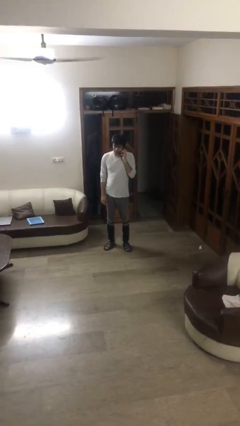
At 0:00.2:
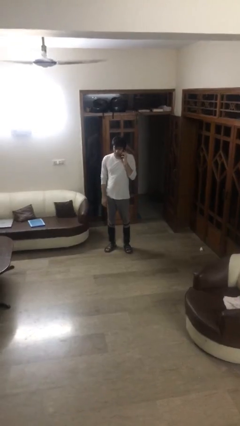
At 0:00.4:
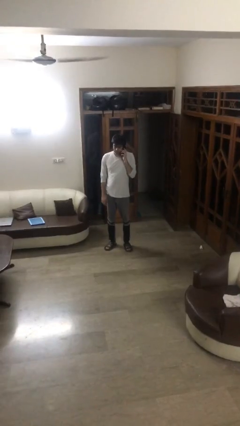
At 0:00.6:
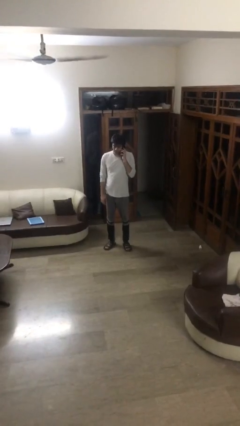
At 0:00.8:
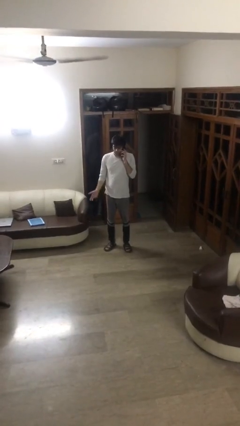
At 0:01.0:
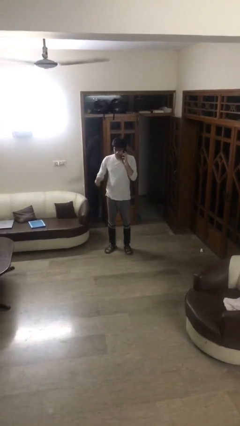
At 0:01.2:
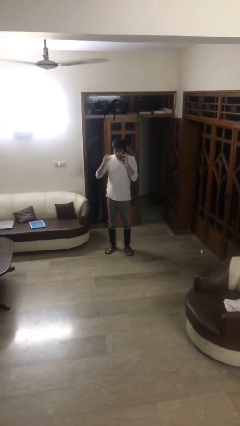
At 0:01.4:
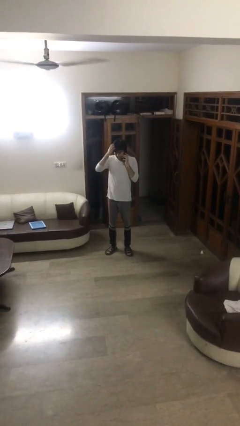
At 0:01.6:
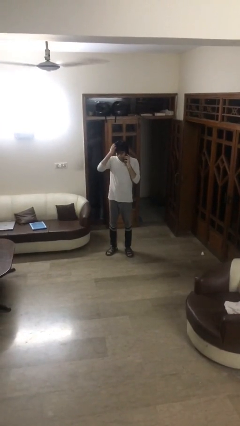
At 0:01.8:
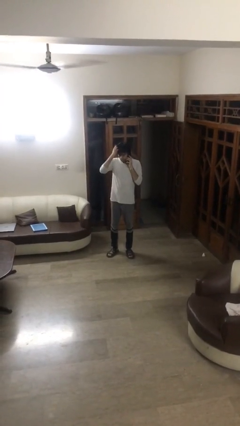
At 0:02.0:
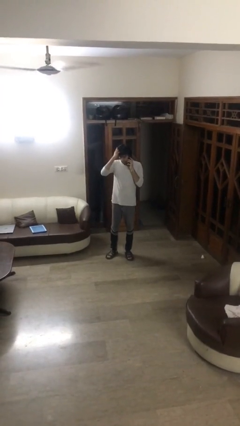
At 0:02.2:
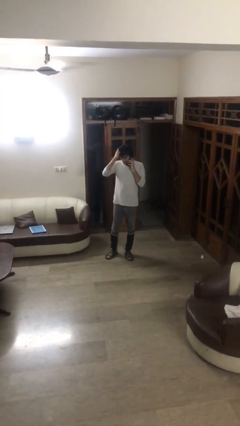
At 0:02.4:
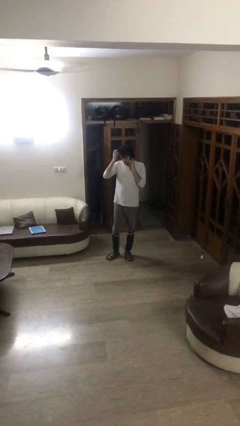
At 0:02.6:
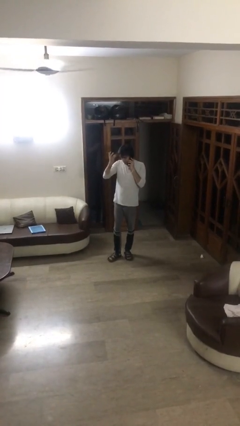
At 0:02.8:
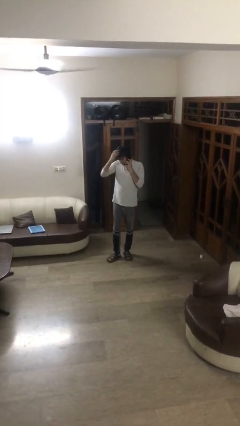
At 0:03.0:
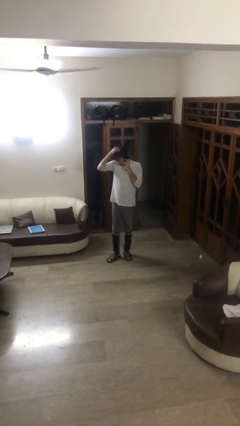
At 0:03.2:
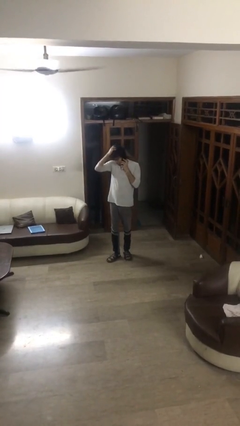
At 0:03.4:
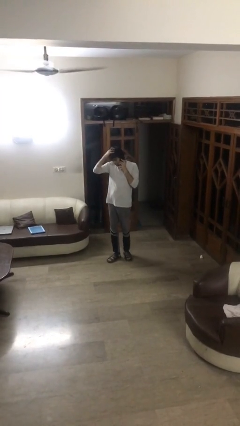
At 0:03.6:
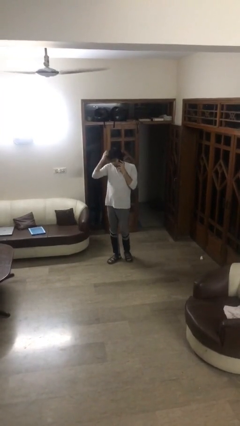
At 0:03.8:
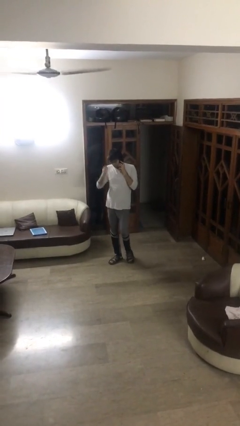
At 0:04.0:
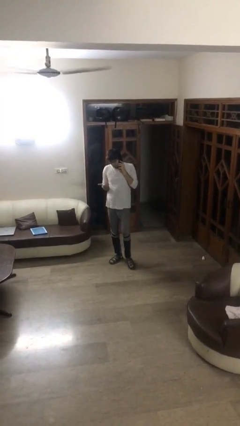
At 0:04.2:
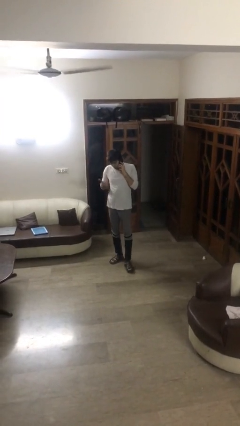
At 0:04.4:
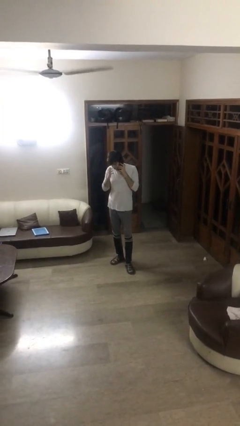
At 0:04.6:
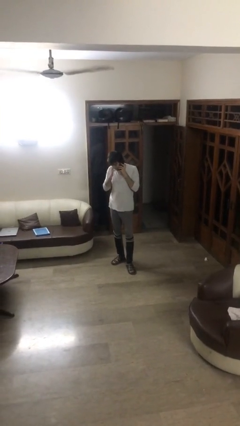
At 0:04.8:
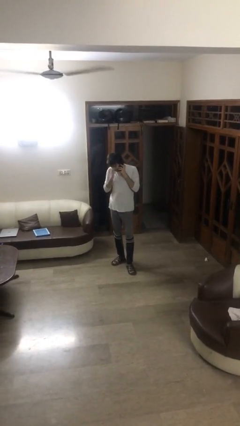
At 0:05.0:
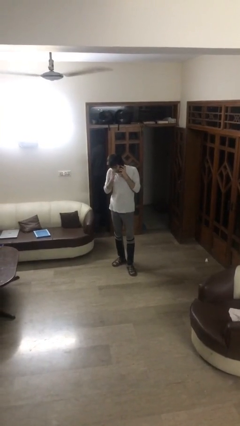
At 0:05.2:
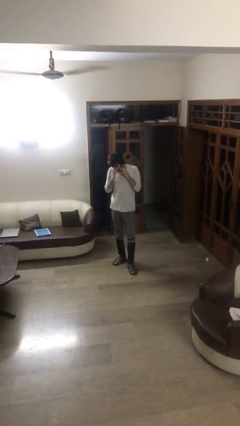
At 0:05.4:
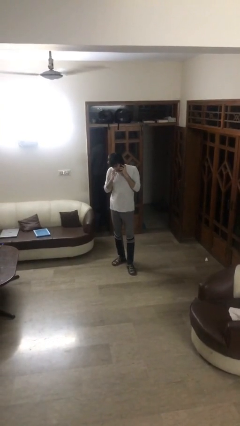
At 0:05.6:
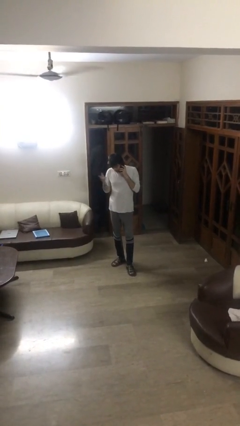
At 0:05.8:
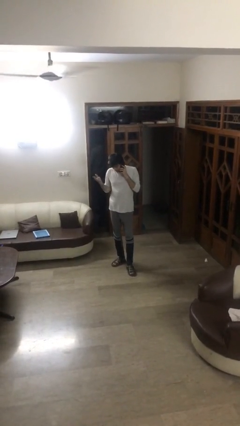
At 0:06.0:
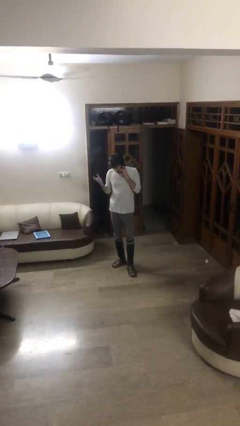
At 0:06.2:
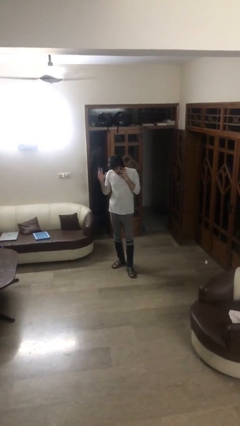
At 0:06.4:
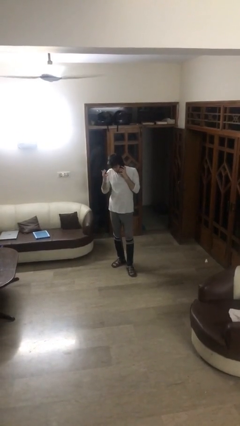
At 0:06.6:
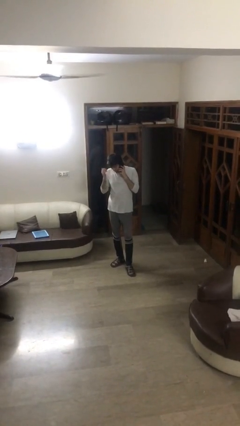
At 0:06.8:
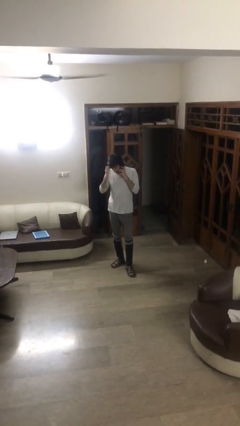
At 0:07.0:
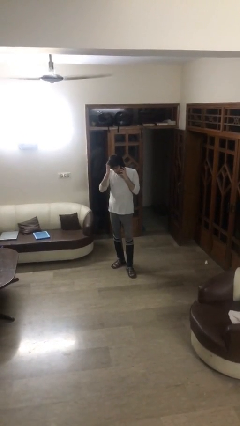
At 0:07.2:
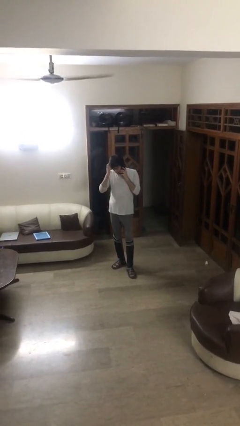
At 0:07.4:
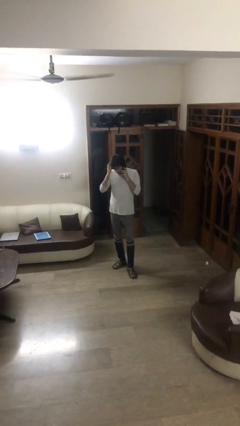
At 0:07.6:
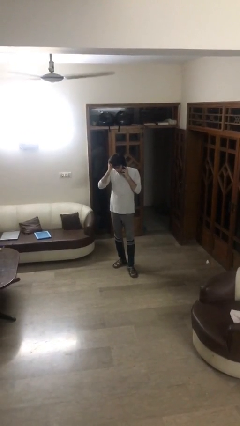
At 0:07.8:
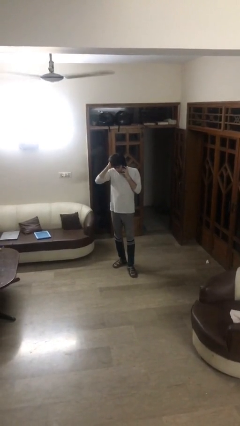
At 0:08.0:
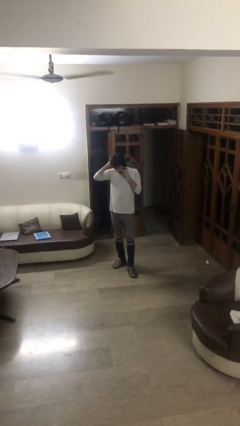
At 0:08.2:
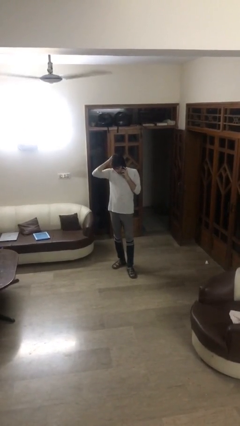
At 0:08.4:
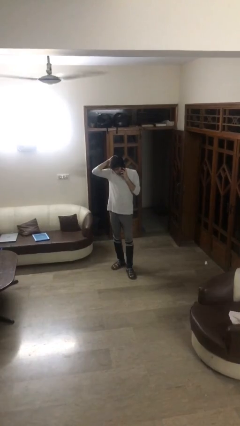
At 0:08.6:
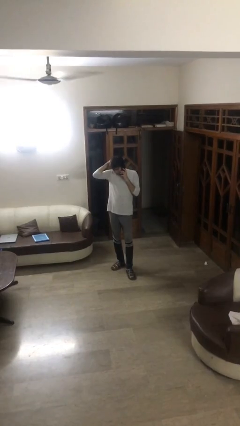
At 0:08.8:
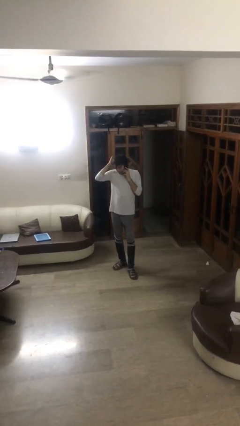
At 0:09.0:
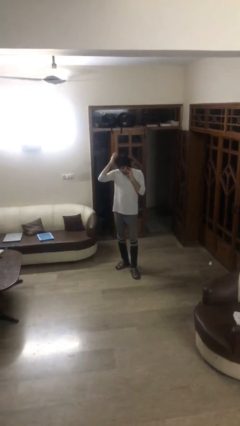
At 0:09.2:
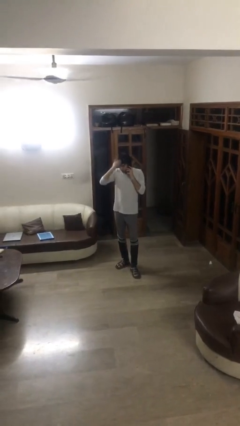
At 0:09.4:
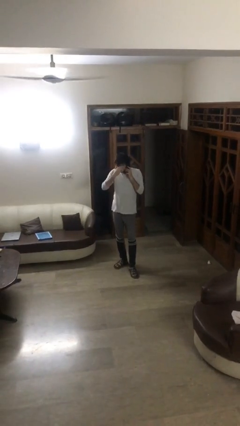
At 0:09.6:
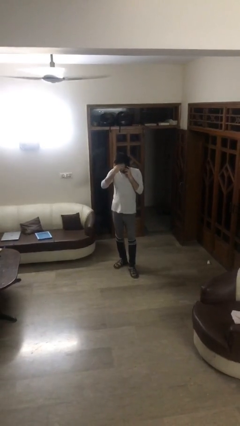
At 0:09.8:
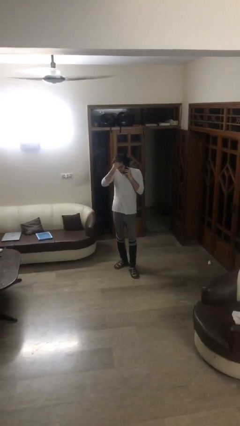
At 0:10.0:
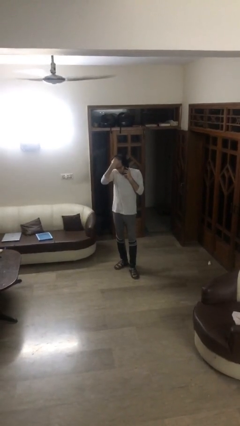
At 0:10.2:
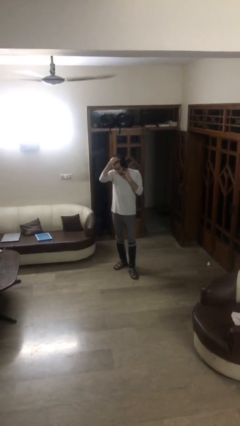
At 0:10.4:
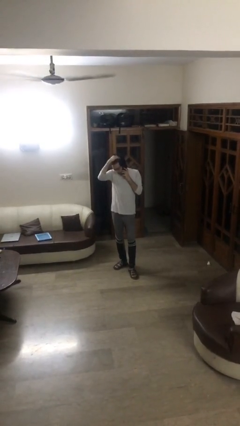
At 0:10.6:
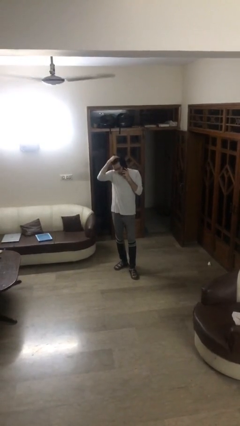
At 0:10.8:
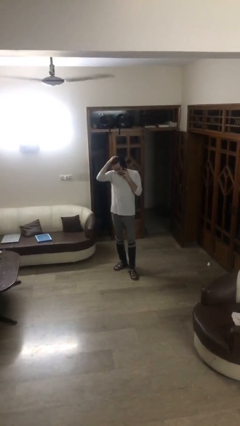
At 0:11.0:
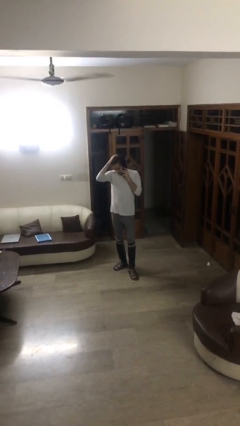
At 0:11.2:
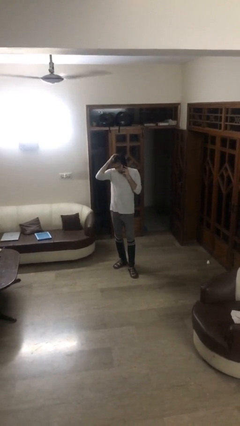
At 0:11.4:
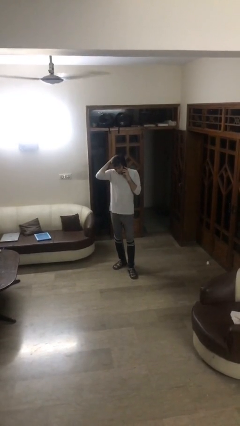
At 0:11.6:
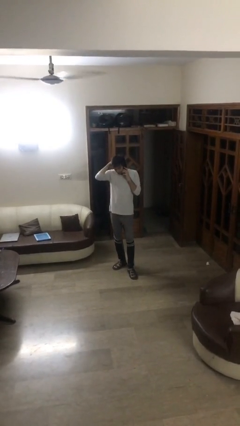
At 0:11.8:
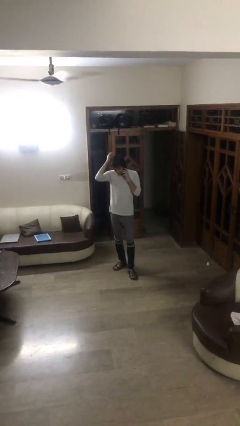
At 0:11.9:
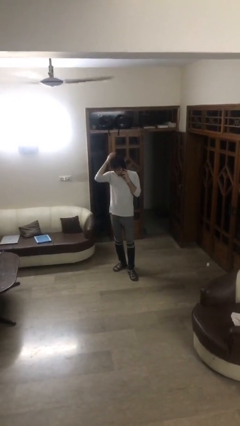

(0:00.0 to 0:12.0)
person talks on phone

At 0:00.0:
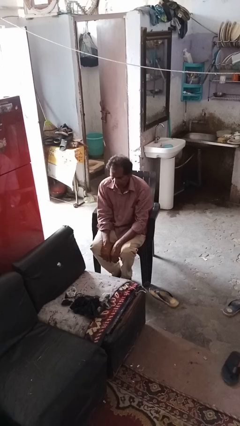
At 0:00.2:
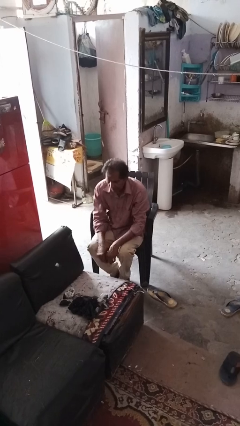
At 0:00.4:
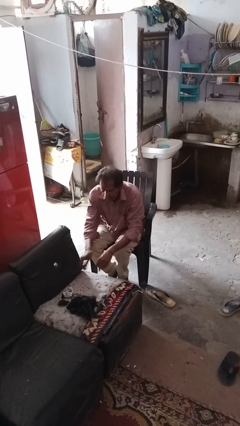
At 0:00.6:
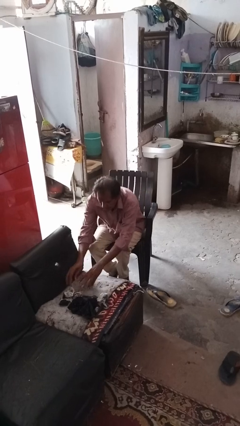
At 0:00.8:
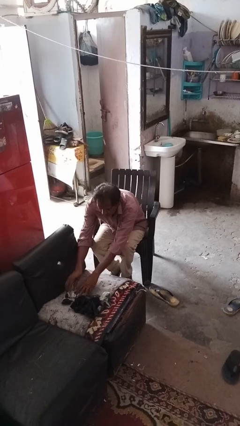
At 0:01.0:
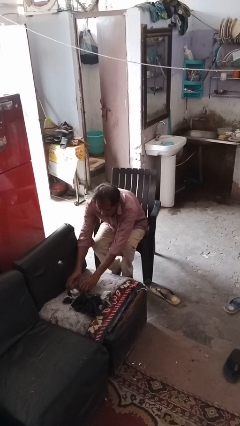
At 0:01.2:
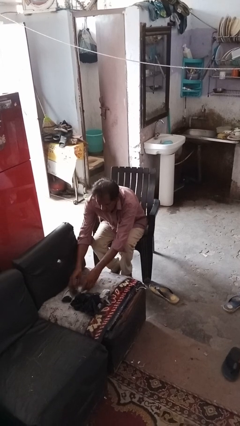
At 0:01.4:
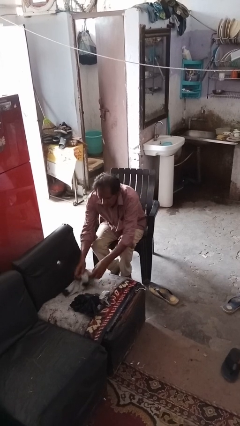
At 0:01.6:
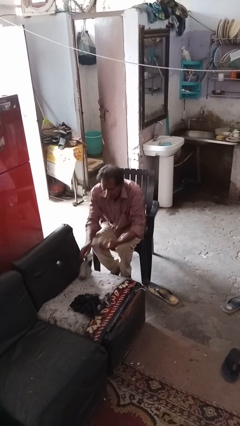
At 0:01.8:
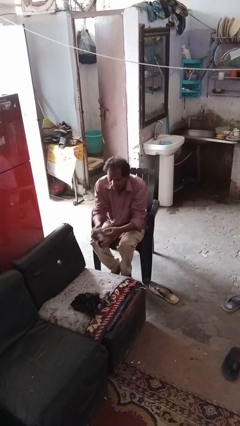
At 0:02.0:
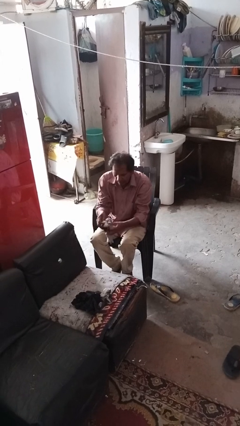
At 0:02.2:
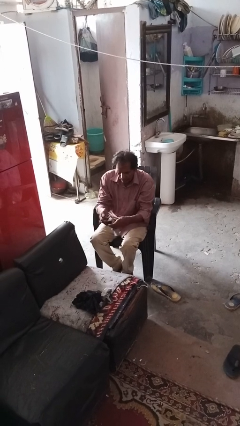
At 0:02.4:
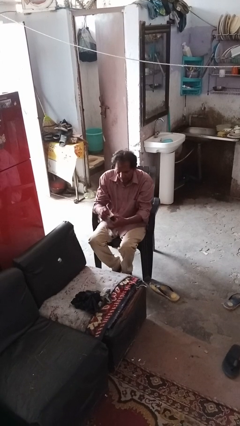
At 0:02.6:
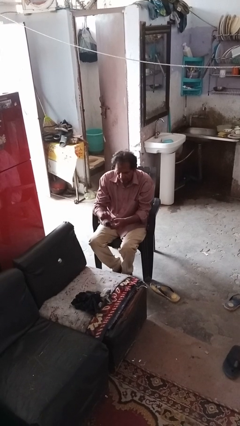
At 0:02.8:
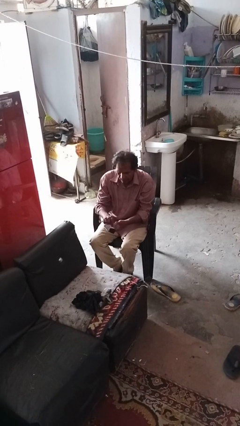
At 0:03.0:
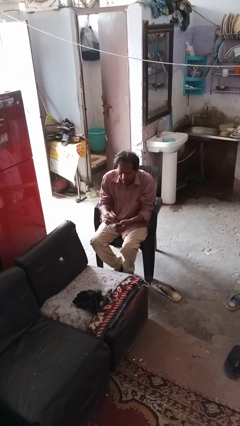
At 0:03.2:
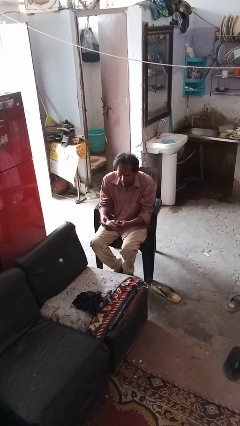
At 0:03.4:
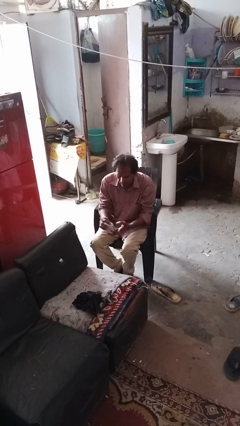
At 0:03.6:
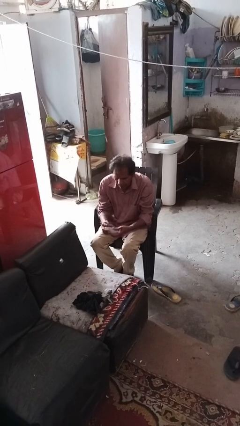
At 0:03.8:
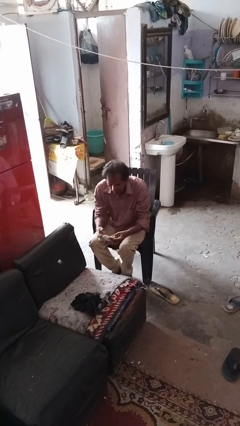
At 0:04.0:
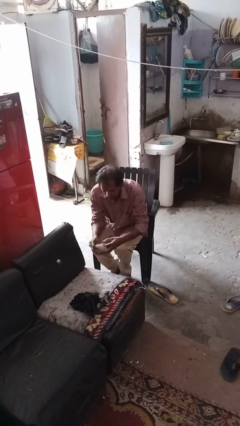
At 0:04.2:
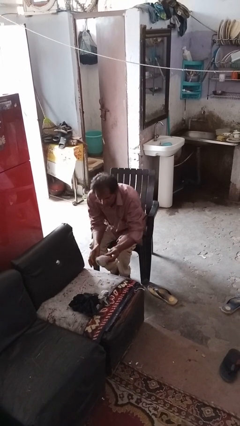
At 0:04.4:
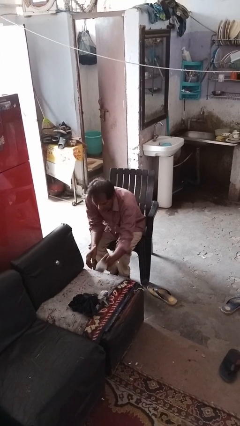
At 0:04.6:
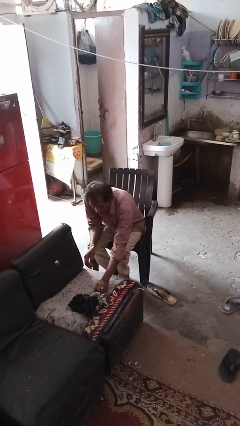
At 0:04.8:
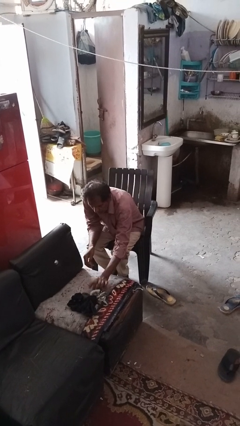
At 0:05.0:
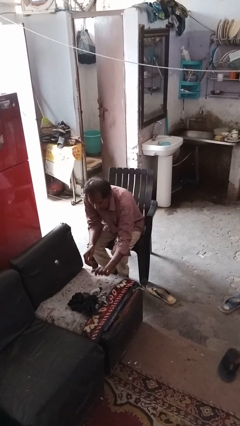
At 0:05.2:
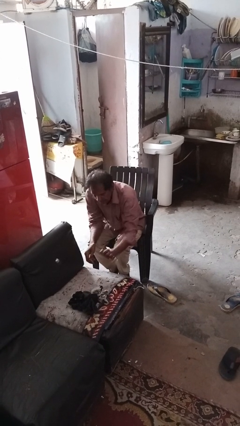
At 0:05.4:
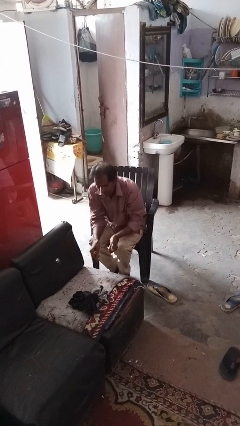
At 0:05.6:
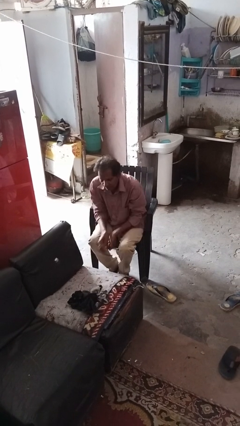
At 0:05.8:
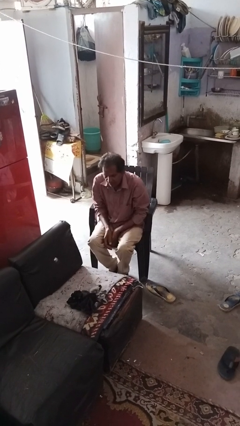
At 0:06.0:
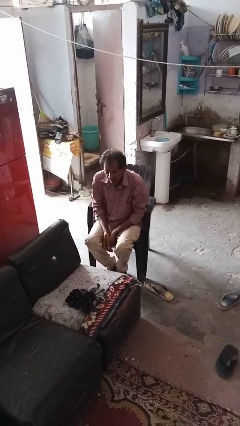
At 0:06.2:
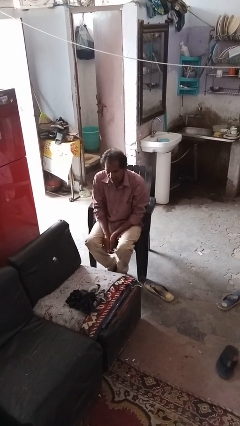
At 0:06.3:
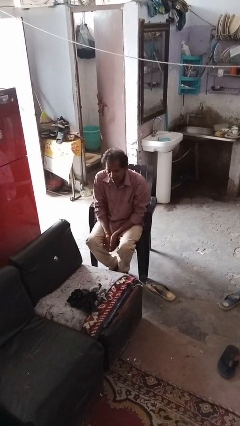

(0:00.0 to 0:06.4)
person folds socks
